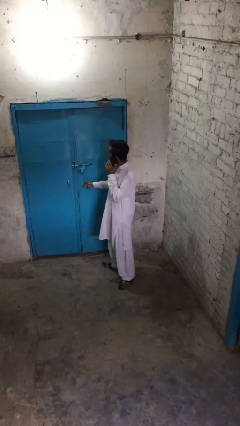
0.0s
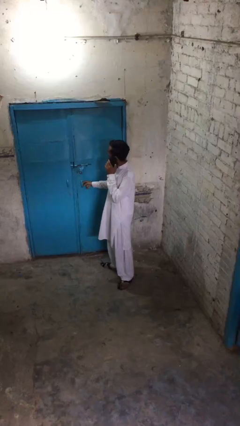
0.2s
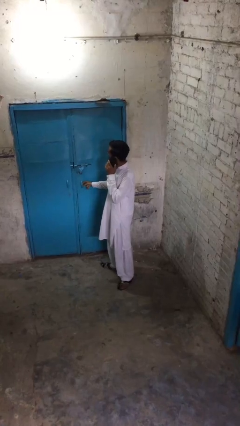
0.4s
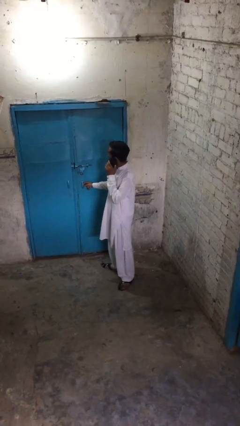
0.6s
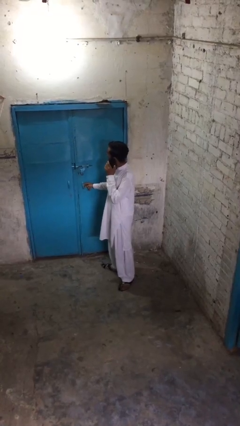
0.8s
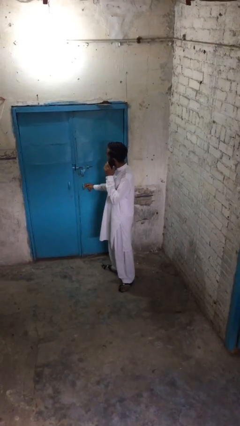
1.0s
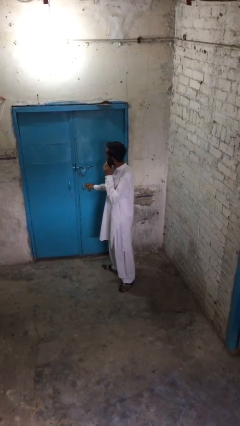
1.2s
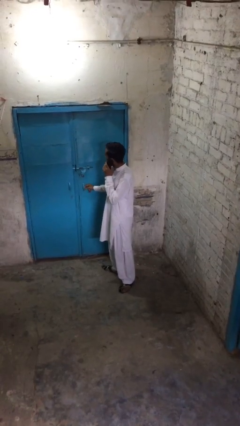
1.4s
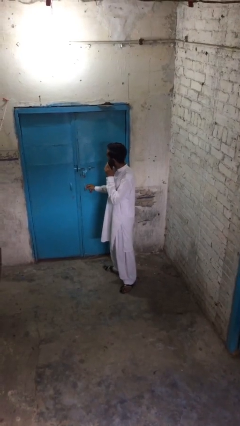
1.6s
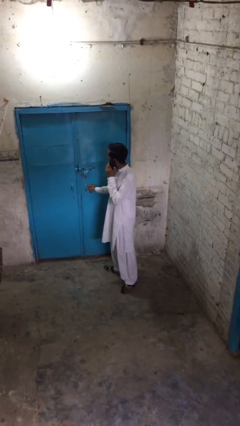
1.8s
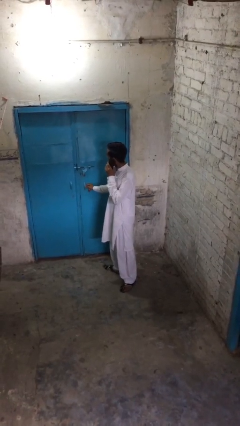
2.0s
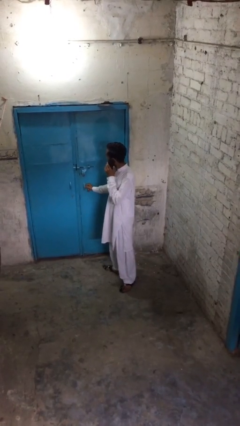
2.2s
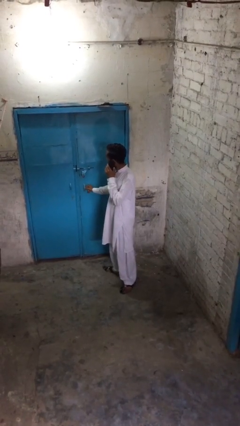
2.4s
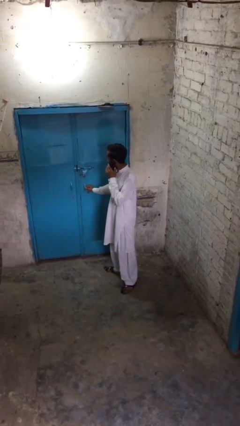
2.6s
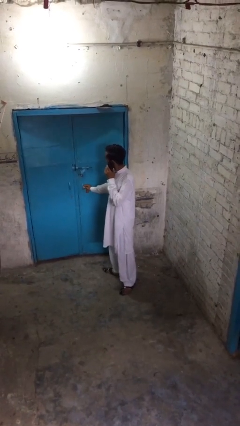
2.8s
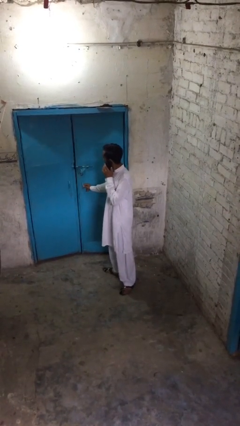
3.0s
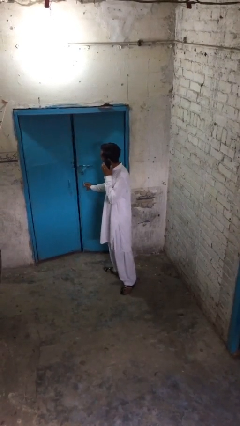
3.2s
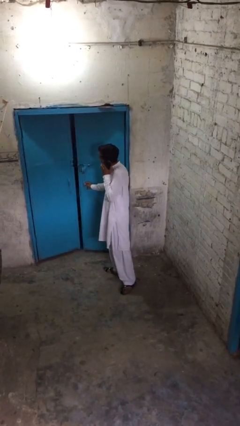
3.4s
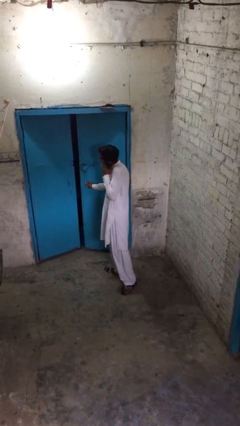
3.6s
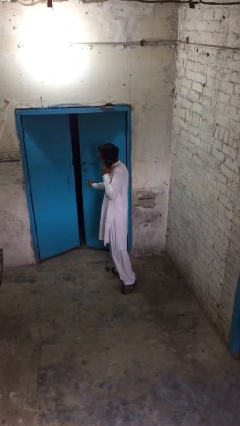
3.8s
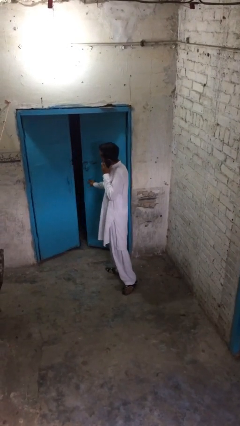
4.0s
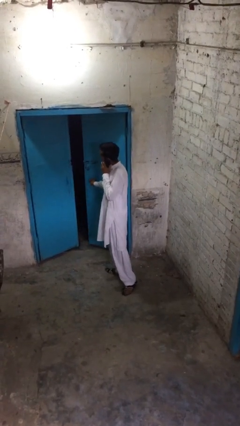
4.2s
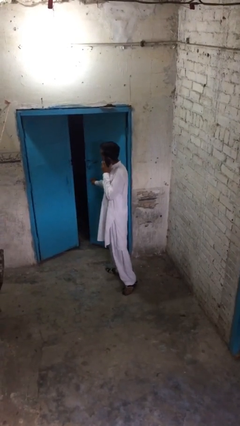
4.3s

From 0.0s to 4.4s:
person opens facility door

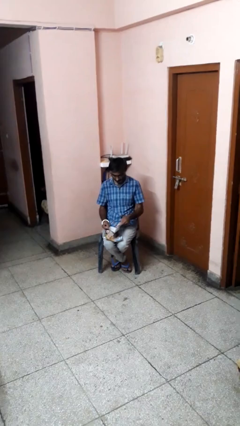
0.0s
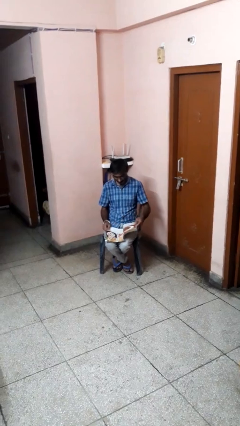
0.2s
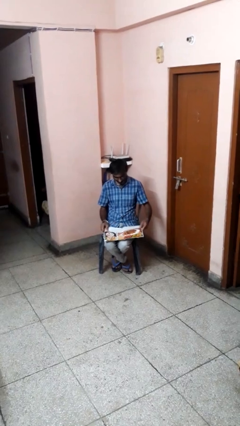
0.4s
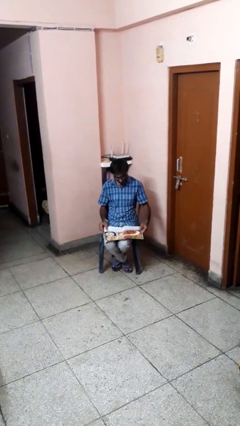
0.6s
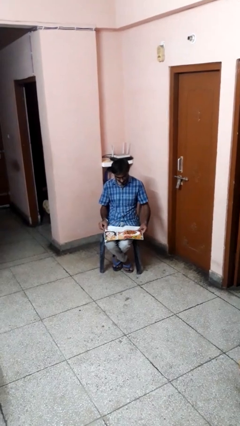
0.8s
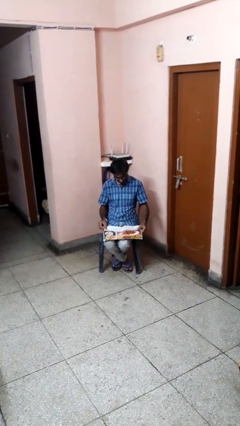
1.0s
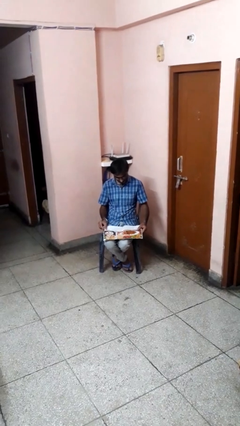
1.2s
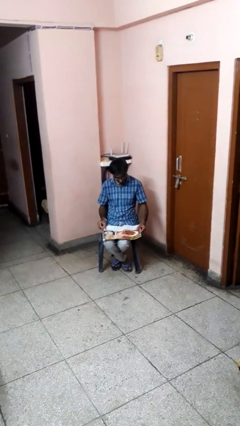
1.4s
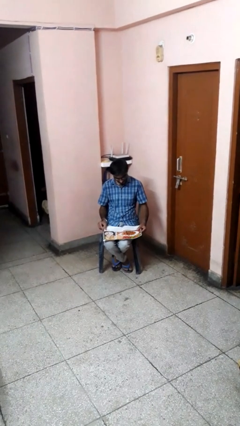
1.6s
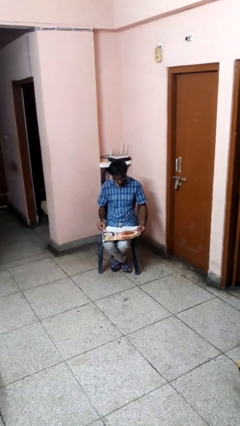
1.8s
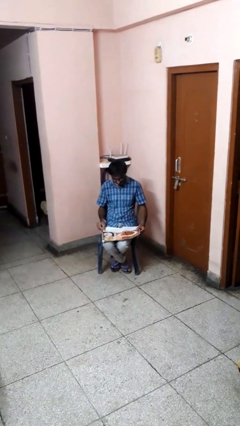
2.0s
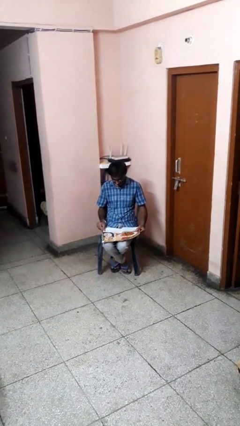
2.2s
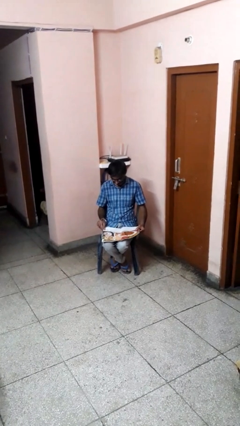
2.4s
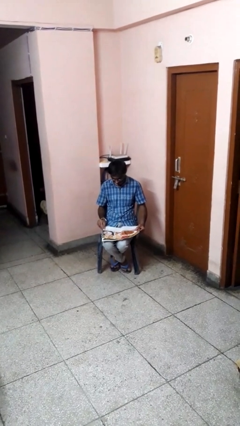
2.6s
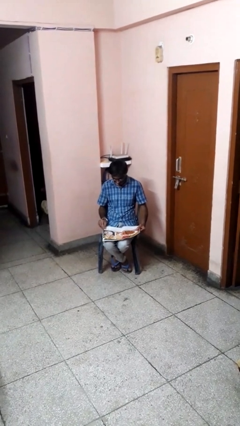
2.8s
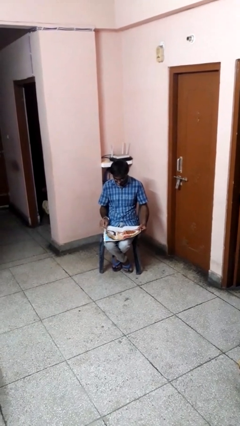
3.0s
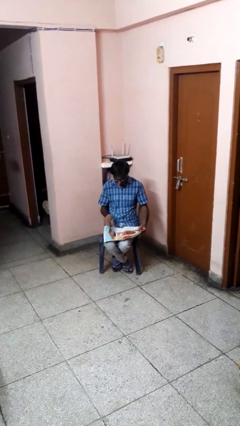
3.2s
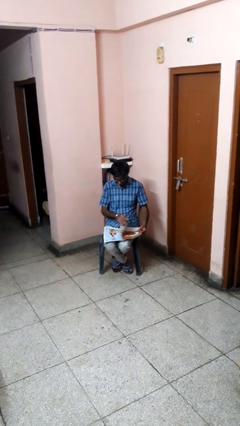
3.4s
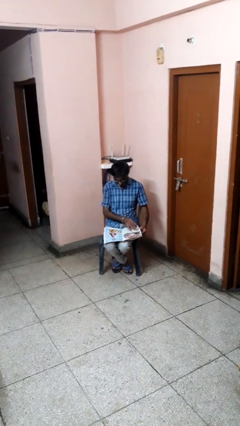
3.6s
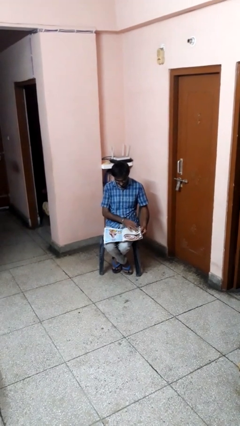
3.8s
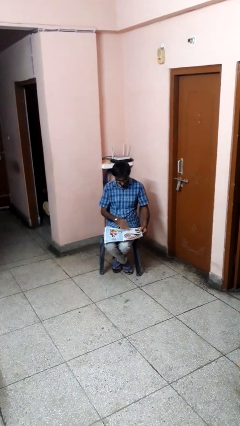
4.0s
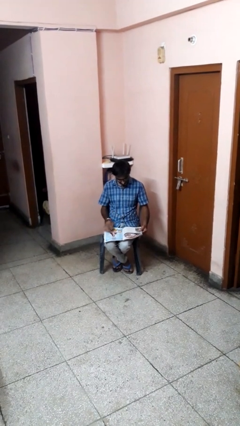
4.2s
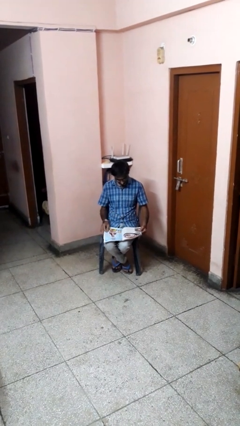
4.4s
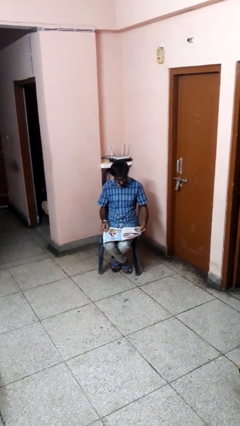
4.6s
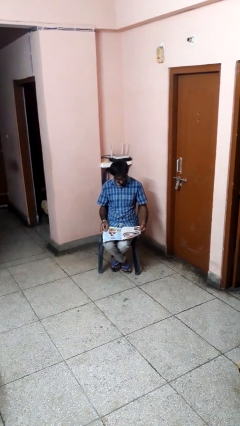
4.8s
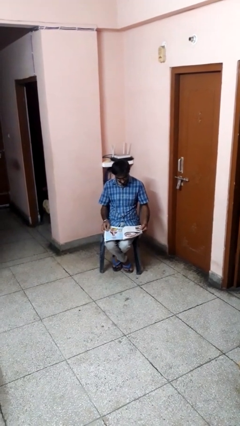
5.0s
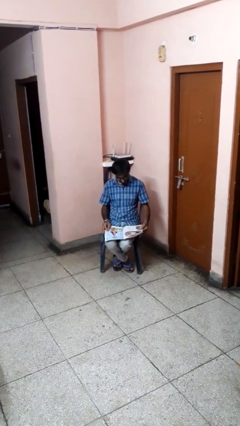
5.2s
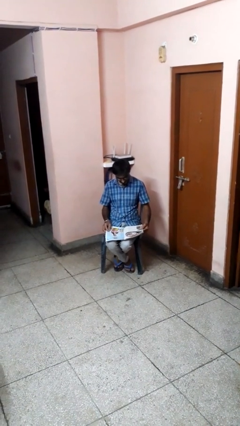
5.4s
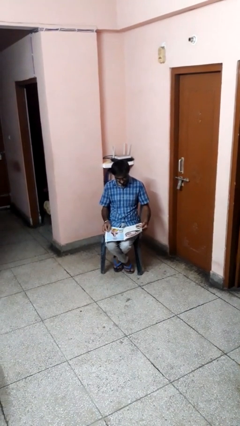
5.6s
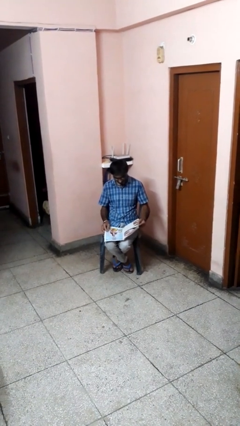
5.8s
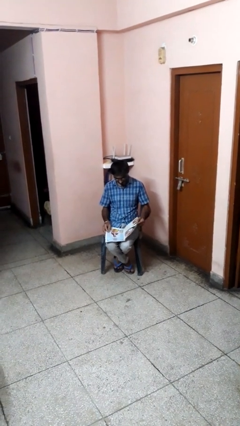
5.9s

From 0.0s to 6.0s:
person reads magazine

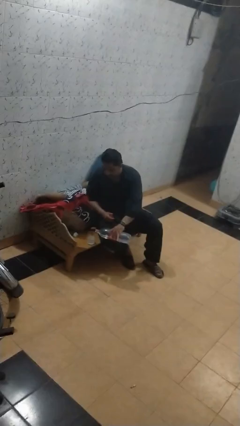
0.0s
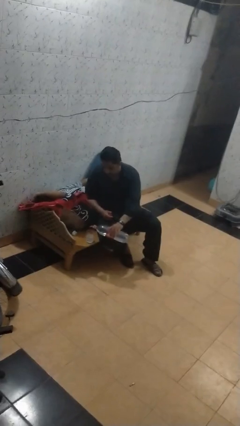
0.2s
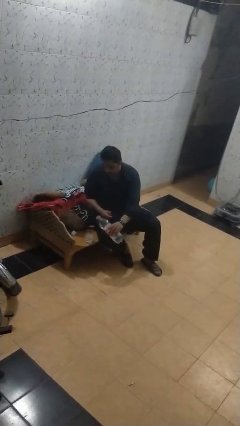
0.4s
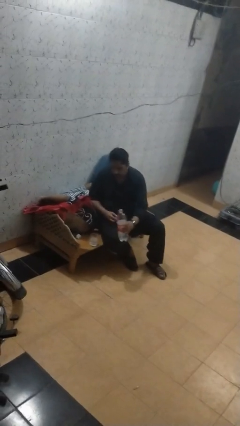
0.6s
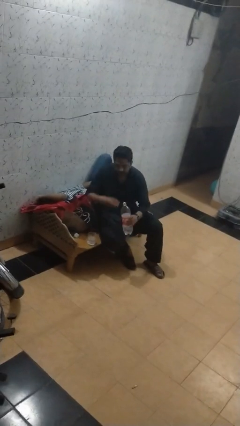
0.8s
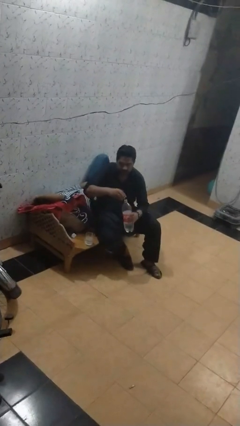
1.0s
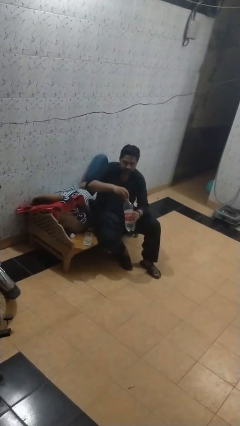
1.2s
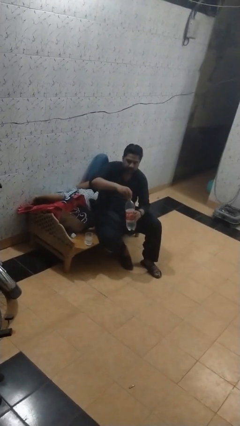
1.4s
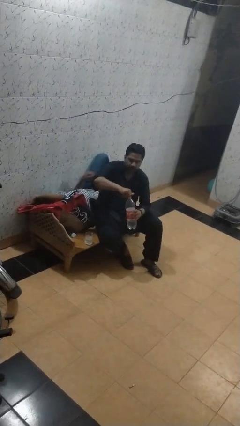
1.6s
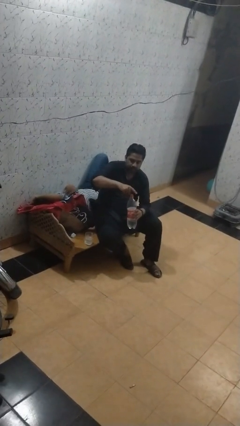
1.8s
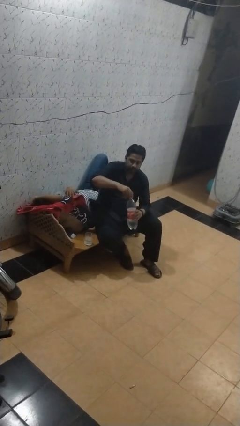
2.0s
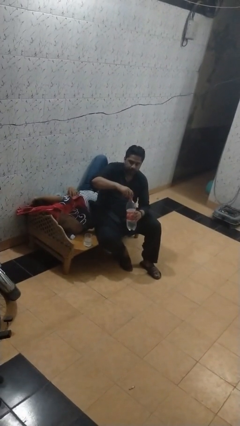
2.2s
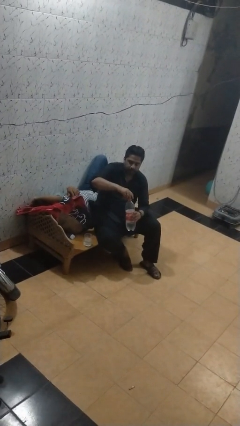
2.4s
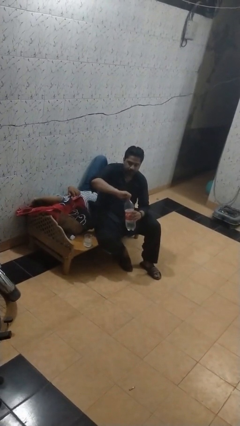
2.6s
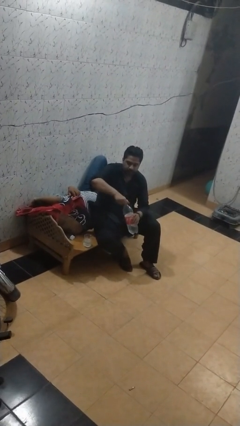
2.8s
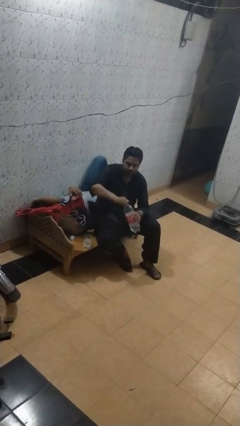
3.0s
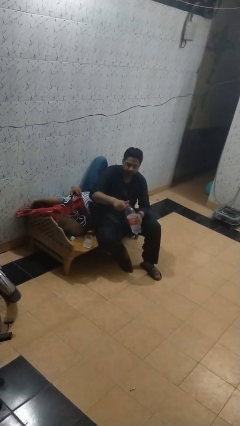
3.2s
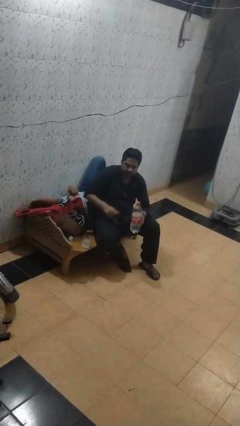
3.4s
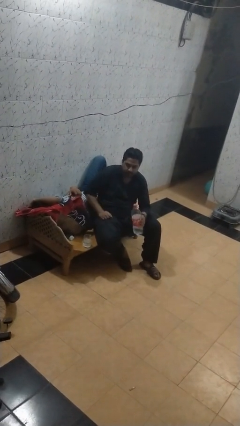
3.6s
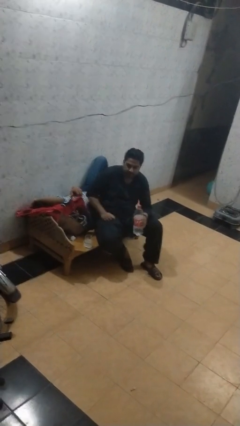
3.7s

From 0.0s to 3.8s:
person screws lid to bottle

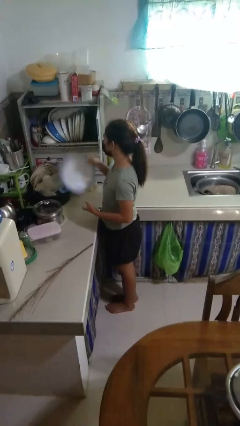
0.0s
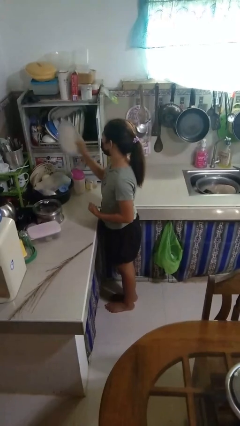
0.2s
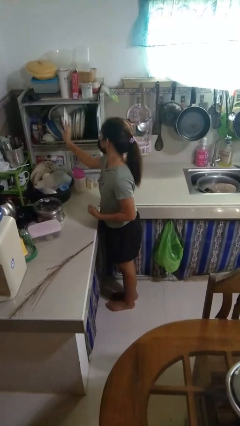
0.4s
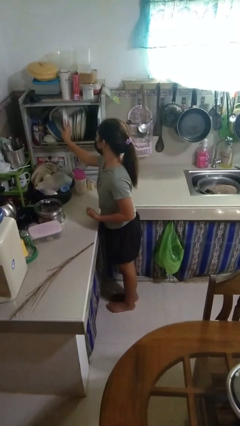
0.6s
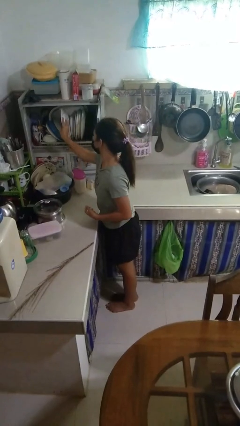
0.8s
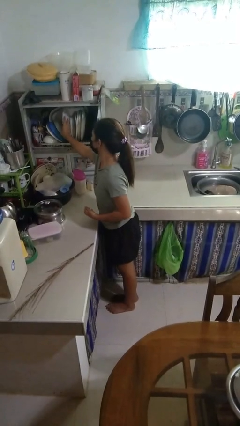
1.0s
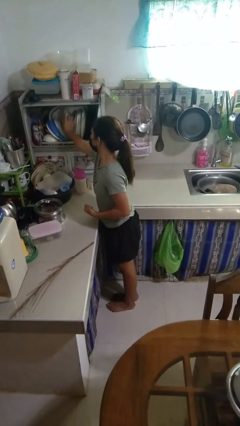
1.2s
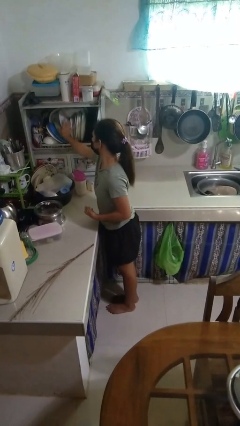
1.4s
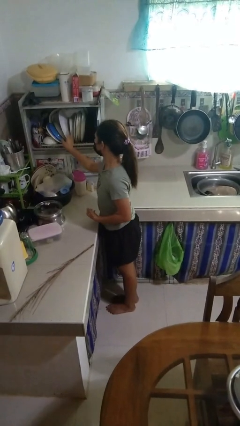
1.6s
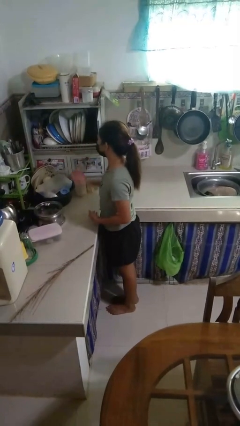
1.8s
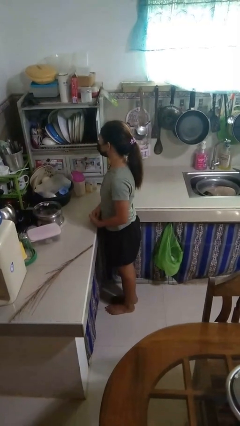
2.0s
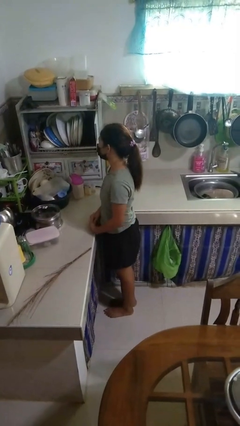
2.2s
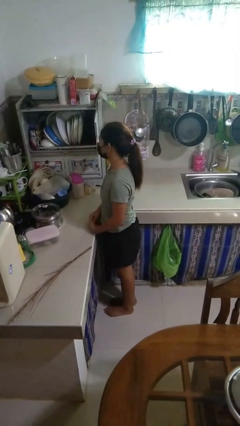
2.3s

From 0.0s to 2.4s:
person puts object into kitchen drawer

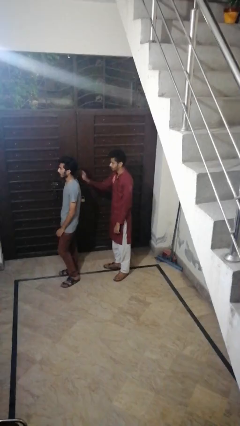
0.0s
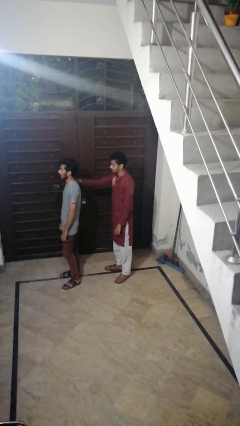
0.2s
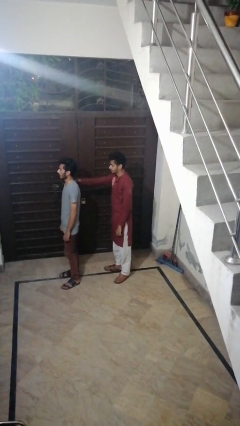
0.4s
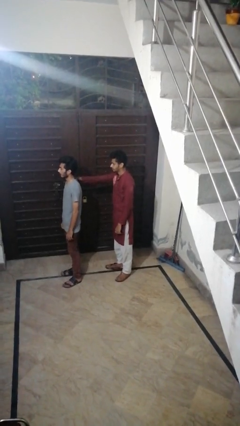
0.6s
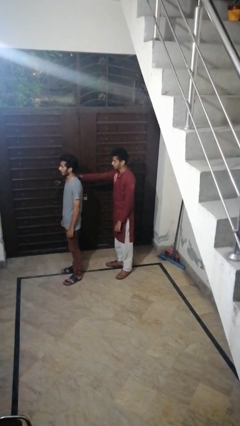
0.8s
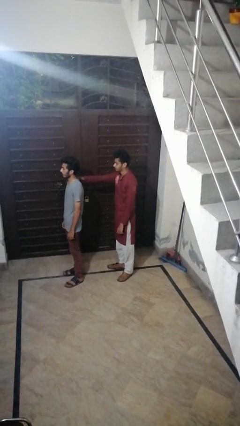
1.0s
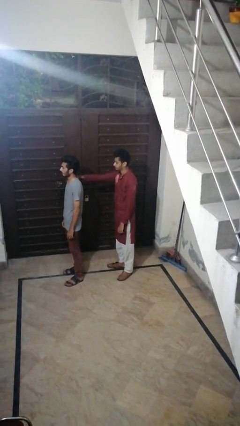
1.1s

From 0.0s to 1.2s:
person grabs person by shoulder
